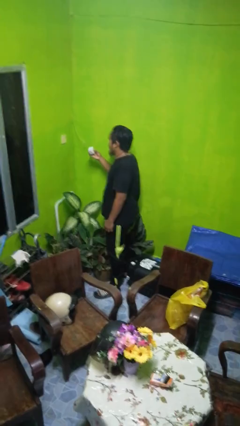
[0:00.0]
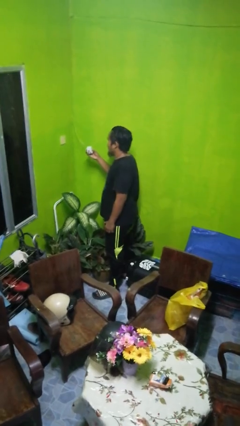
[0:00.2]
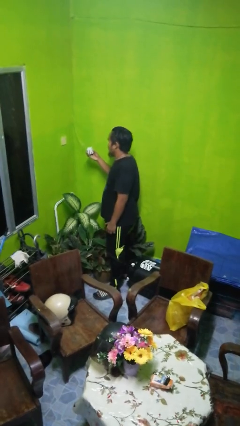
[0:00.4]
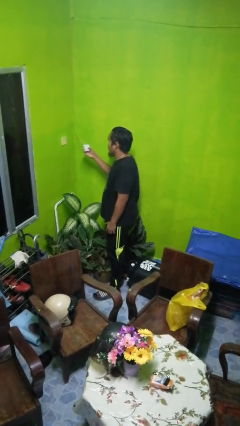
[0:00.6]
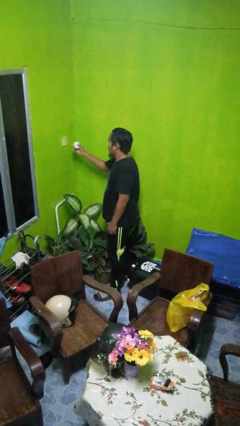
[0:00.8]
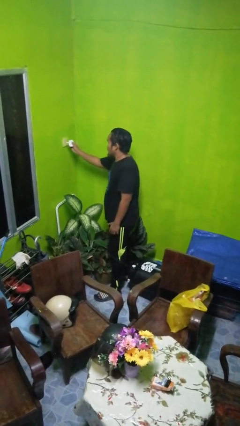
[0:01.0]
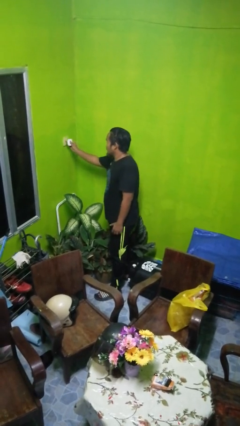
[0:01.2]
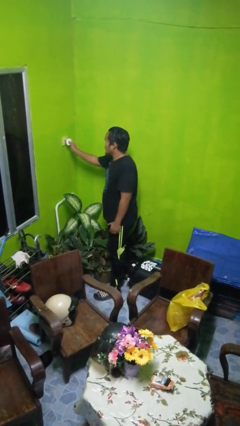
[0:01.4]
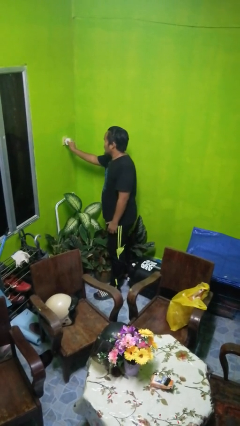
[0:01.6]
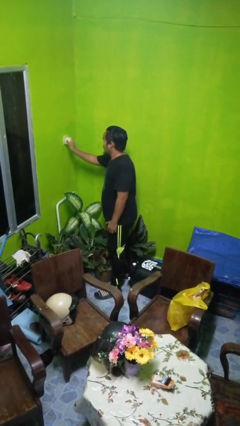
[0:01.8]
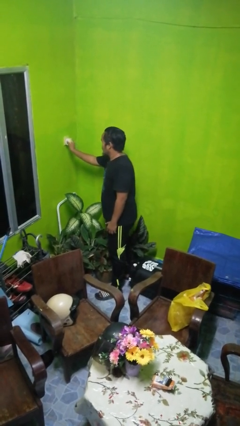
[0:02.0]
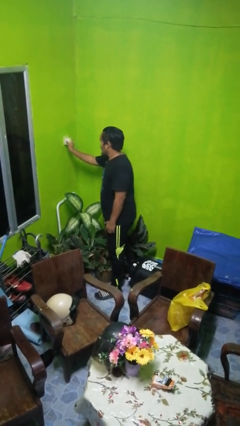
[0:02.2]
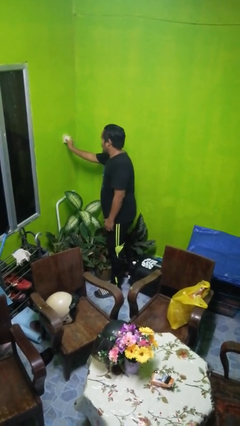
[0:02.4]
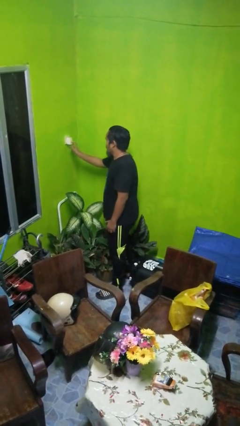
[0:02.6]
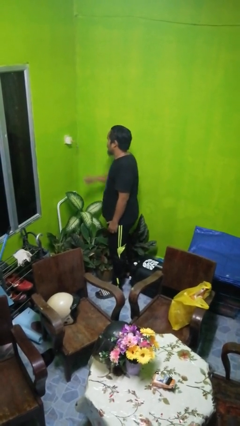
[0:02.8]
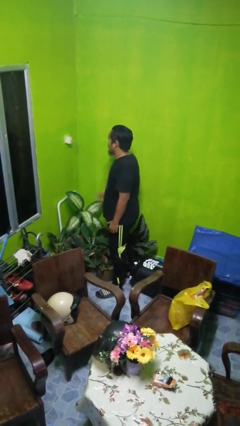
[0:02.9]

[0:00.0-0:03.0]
person plugs into electrical socket

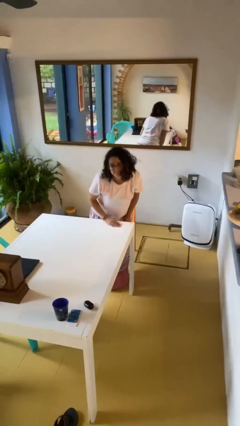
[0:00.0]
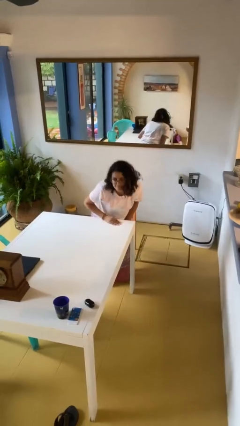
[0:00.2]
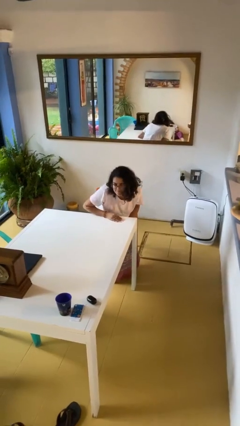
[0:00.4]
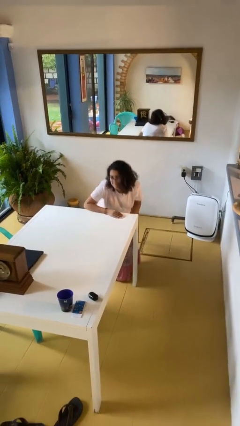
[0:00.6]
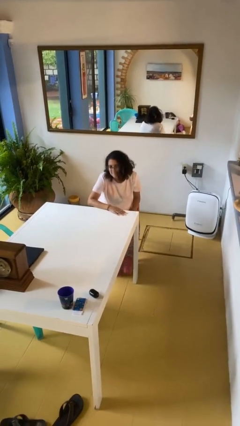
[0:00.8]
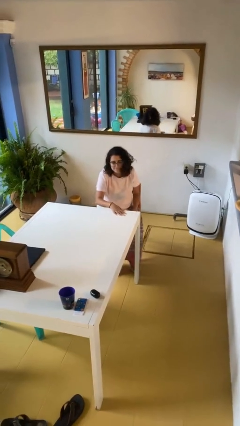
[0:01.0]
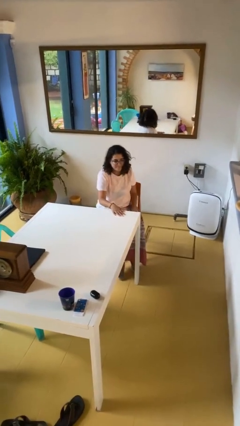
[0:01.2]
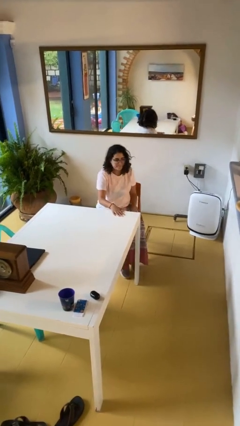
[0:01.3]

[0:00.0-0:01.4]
person sits down

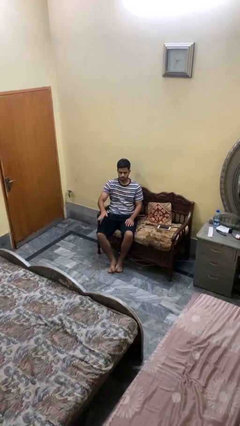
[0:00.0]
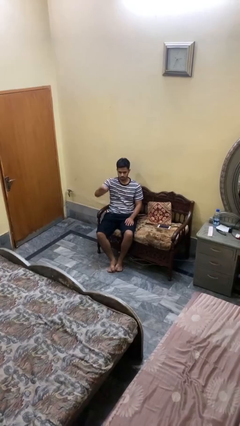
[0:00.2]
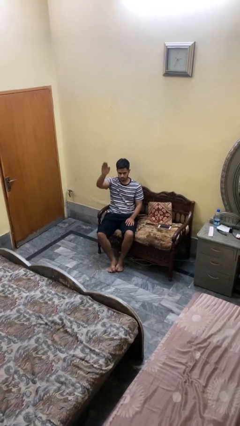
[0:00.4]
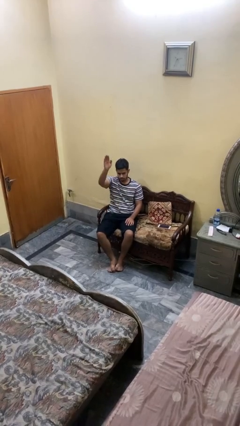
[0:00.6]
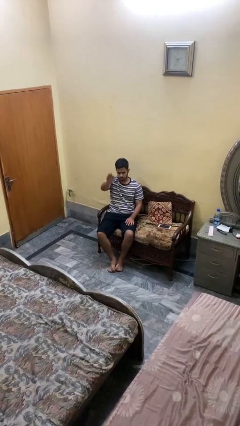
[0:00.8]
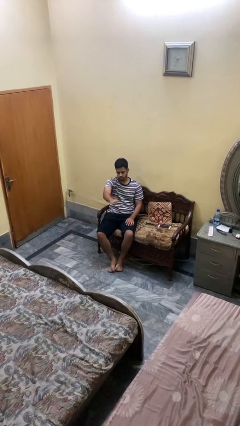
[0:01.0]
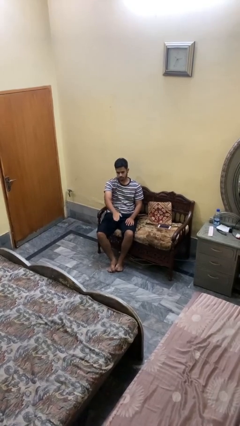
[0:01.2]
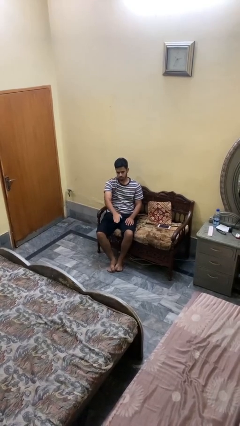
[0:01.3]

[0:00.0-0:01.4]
person gestures swipe down

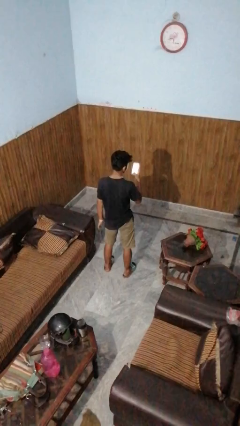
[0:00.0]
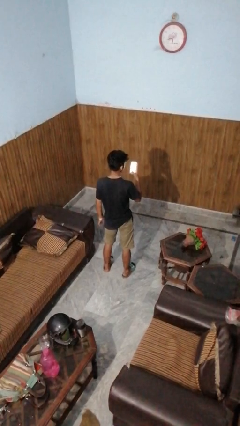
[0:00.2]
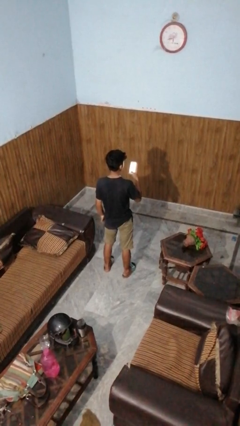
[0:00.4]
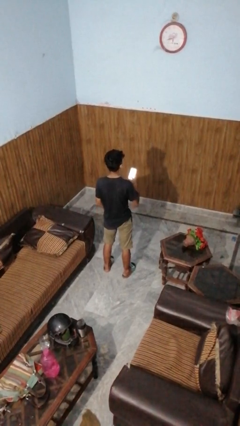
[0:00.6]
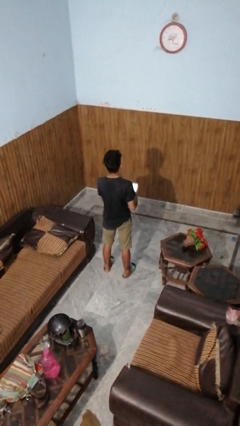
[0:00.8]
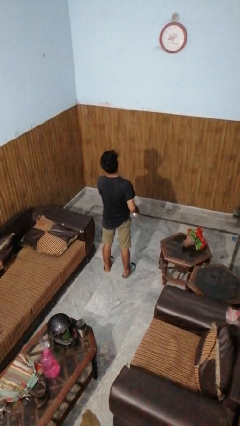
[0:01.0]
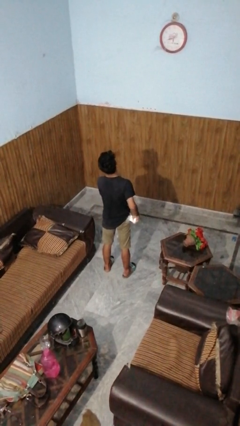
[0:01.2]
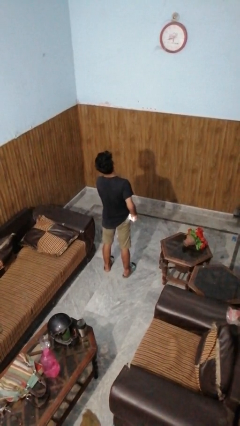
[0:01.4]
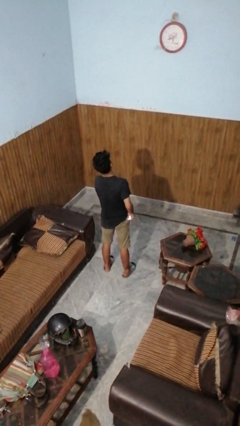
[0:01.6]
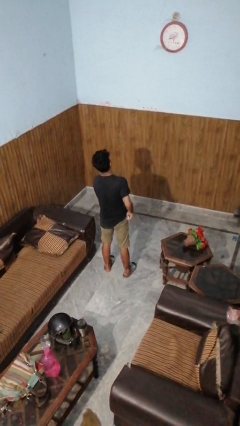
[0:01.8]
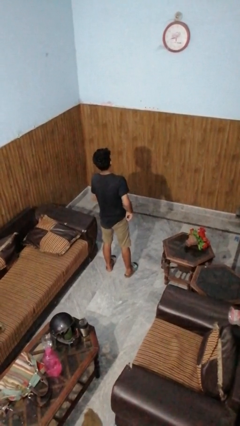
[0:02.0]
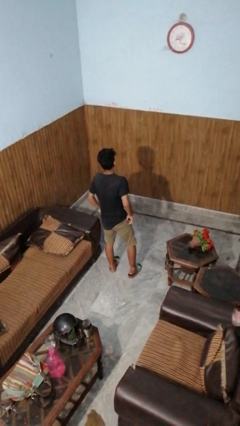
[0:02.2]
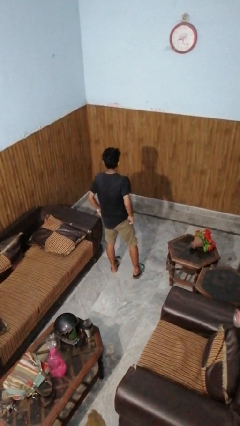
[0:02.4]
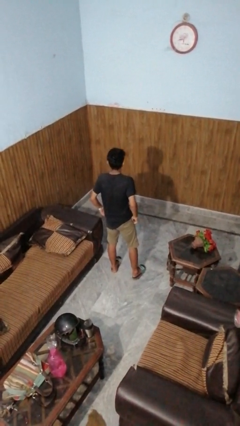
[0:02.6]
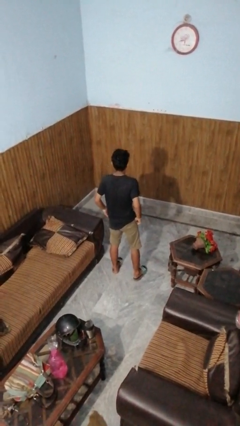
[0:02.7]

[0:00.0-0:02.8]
person puts phone into pocket

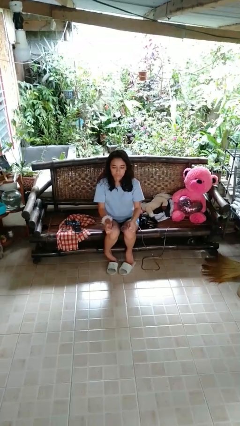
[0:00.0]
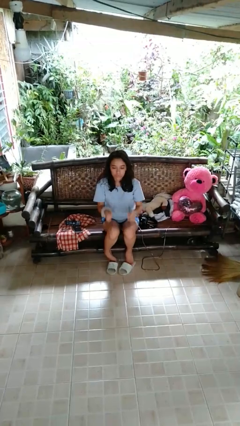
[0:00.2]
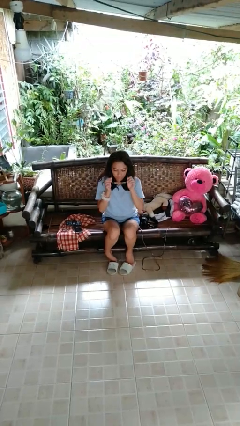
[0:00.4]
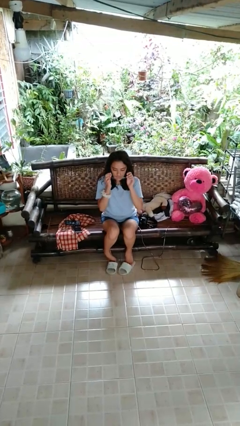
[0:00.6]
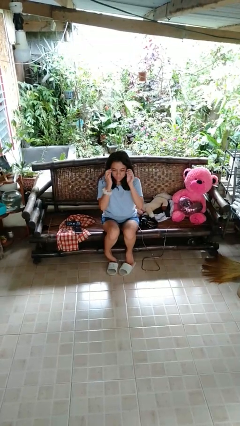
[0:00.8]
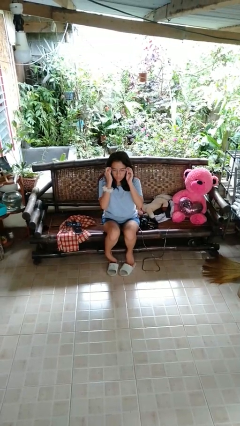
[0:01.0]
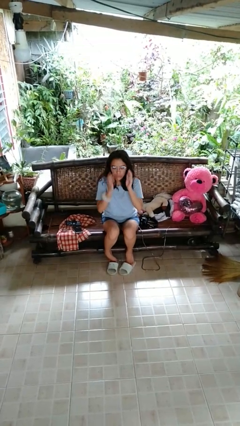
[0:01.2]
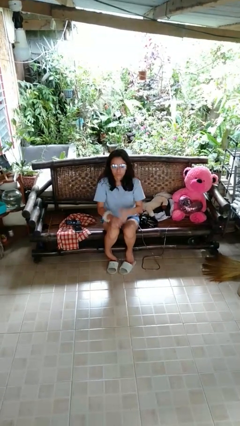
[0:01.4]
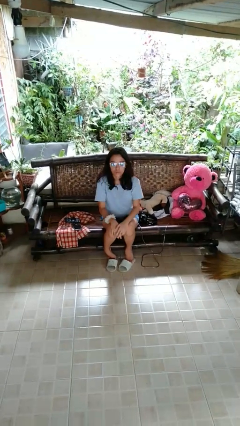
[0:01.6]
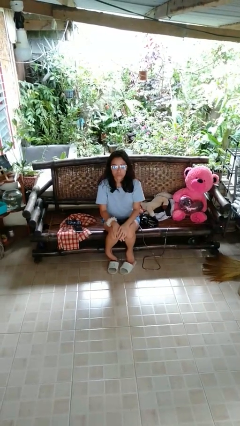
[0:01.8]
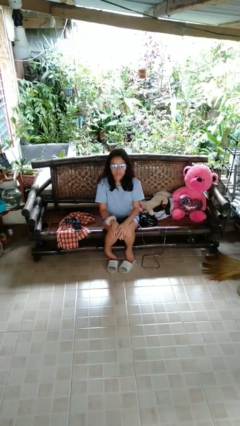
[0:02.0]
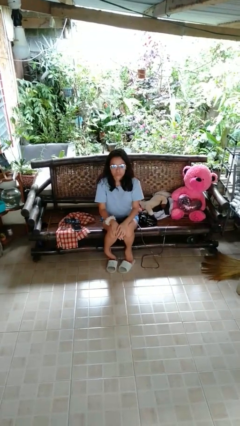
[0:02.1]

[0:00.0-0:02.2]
person grabs person by forearm

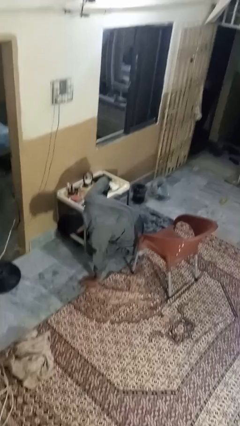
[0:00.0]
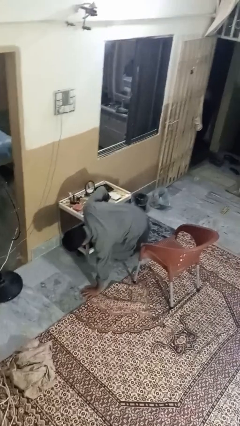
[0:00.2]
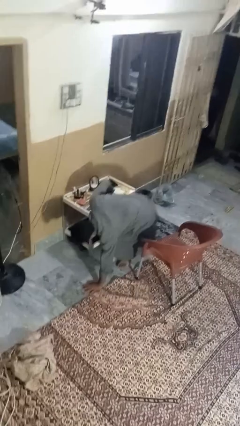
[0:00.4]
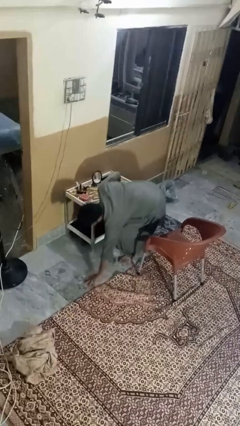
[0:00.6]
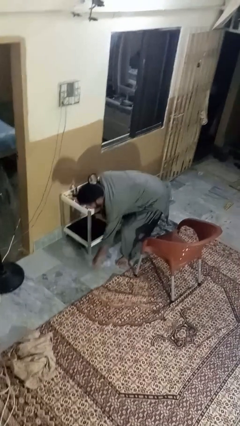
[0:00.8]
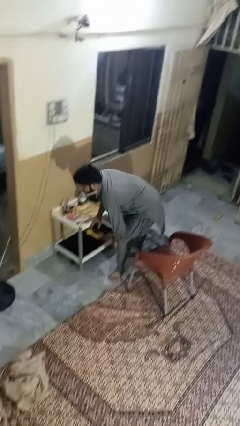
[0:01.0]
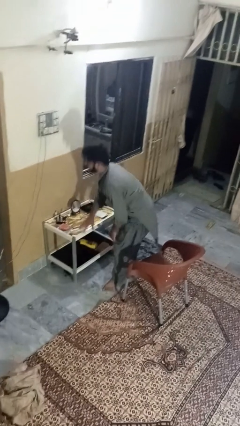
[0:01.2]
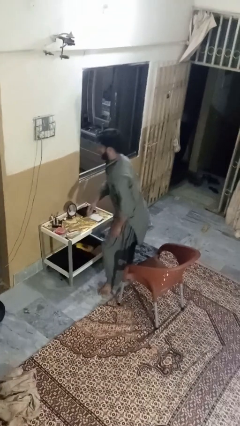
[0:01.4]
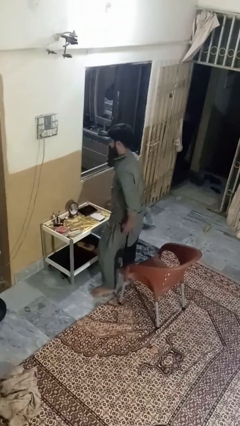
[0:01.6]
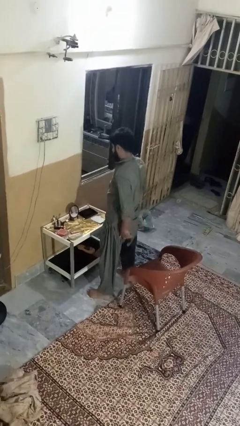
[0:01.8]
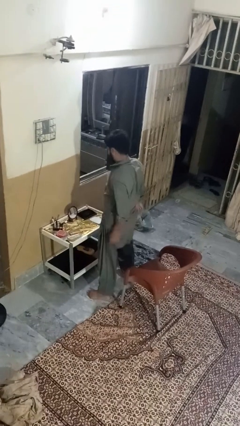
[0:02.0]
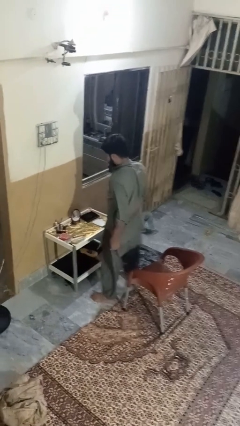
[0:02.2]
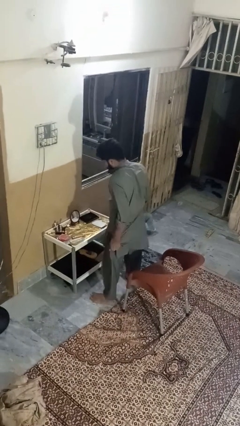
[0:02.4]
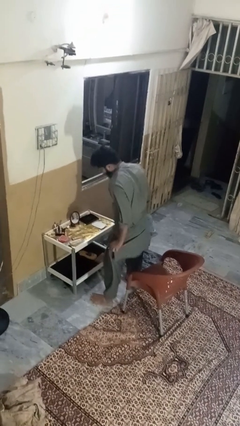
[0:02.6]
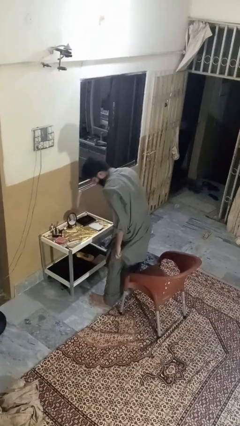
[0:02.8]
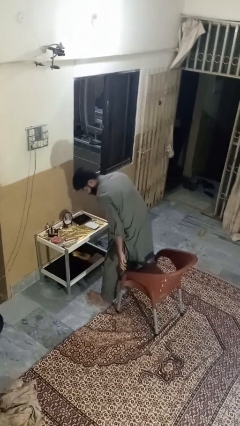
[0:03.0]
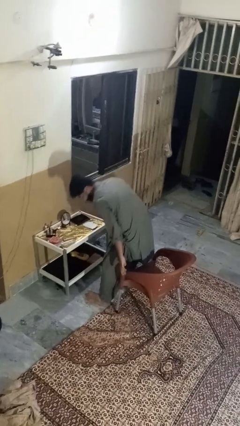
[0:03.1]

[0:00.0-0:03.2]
person stands up from floor

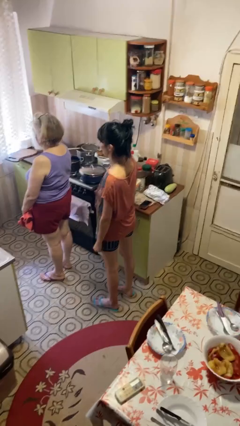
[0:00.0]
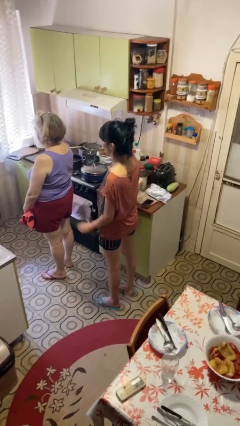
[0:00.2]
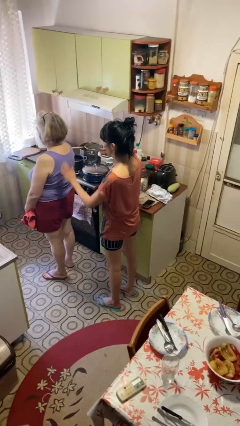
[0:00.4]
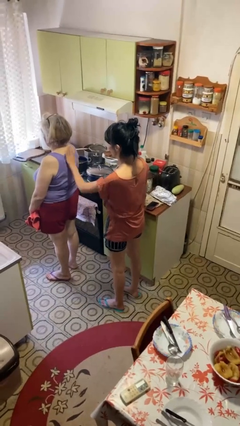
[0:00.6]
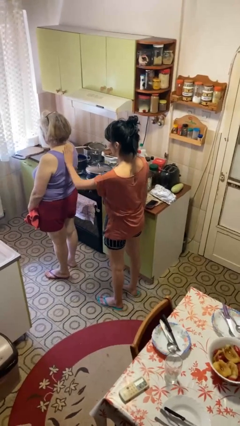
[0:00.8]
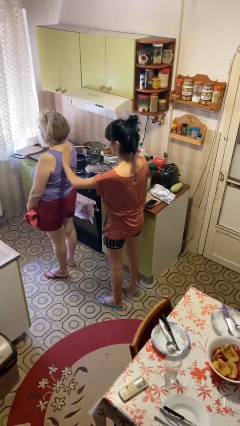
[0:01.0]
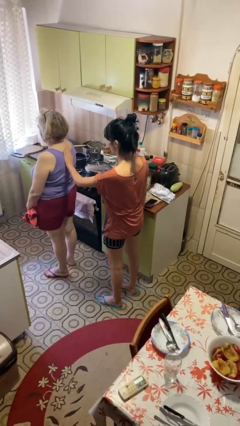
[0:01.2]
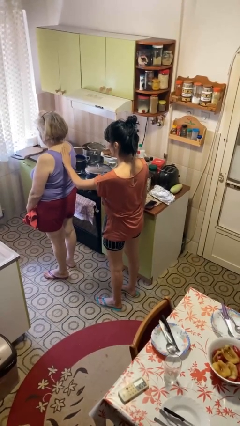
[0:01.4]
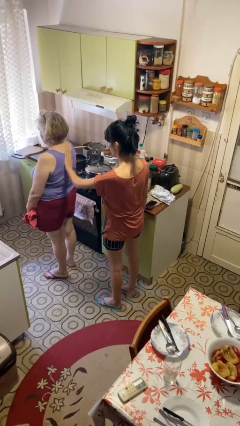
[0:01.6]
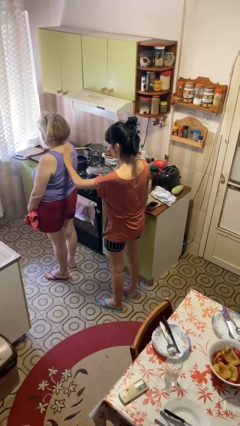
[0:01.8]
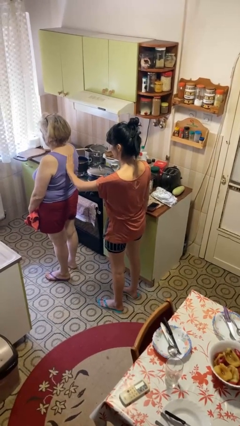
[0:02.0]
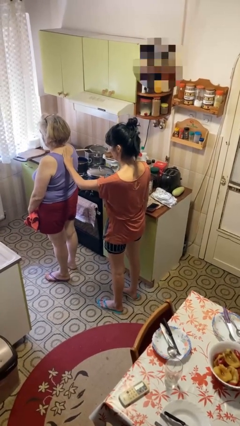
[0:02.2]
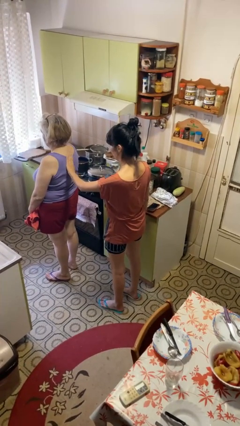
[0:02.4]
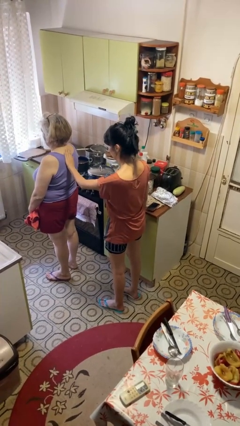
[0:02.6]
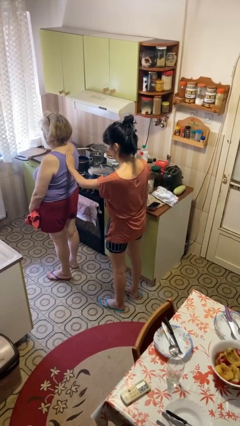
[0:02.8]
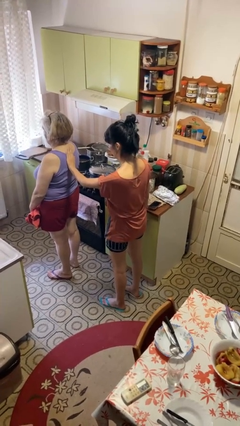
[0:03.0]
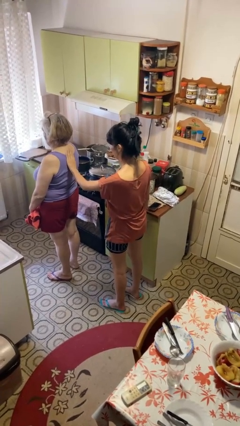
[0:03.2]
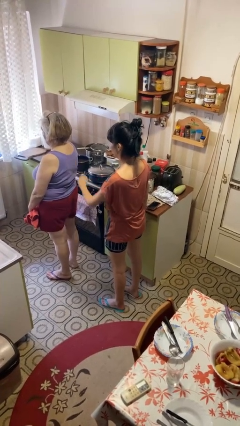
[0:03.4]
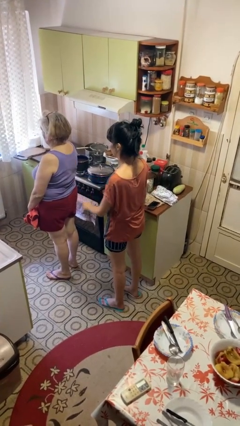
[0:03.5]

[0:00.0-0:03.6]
person touches back of person
